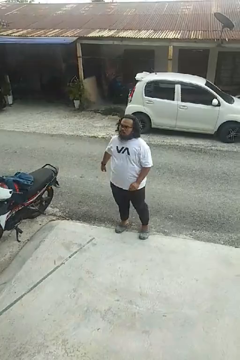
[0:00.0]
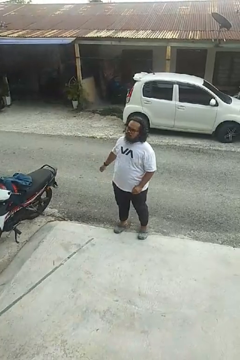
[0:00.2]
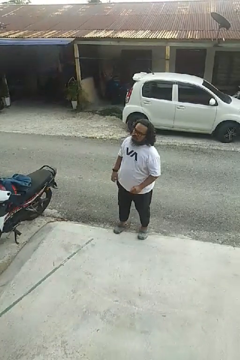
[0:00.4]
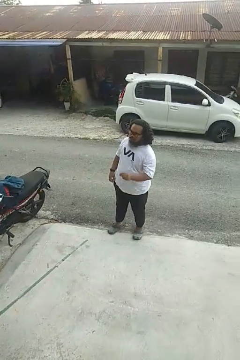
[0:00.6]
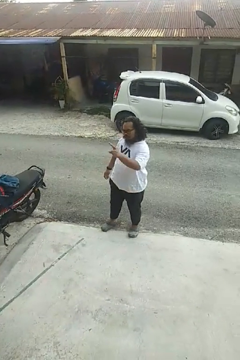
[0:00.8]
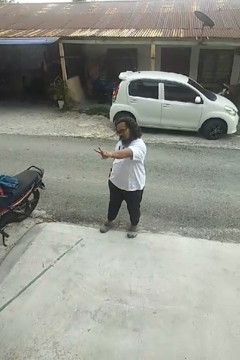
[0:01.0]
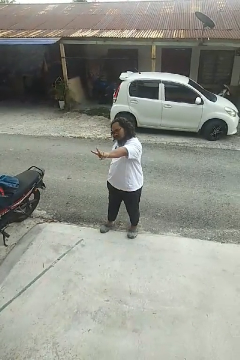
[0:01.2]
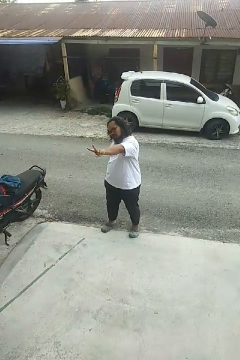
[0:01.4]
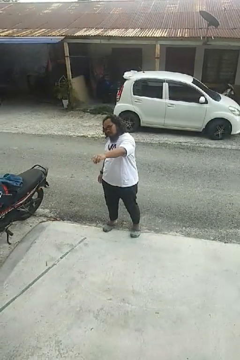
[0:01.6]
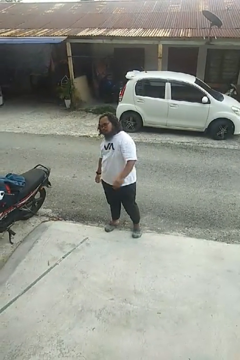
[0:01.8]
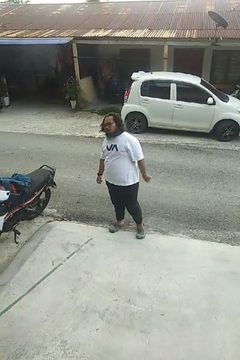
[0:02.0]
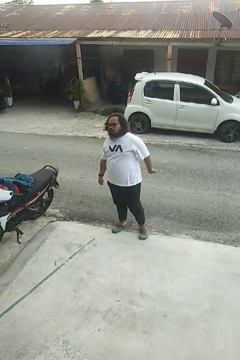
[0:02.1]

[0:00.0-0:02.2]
person gestures peace

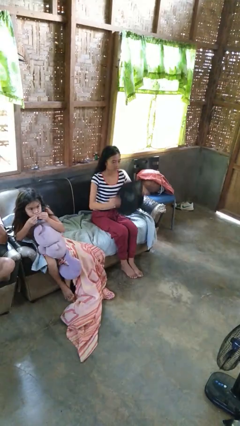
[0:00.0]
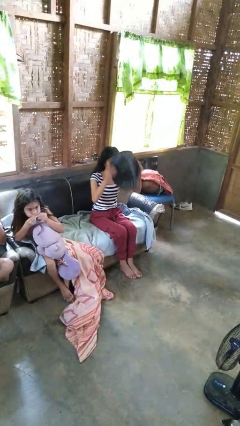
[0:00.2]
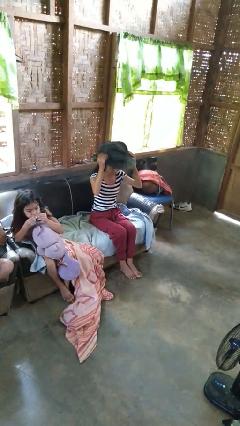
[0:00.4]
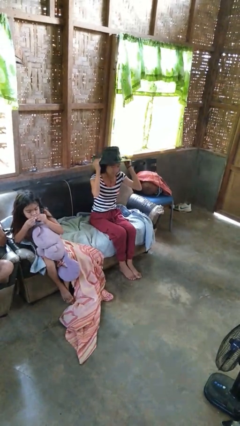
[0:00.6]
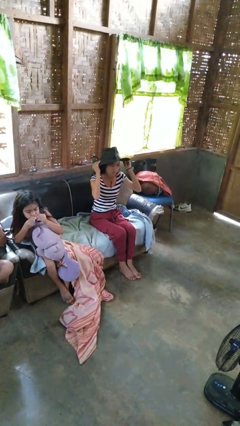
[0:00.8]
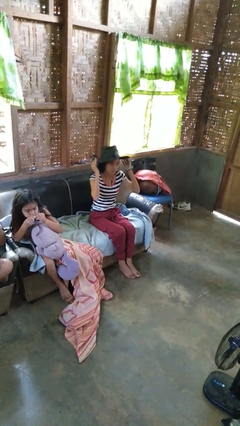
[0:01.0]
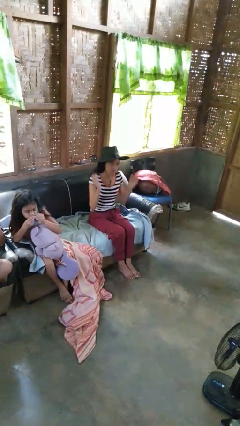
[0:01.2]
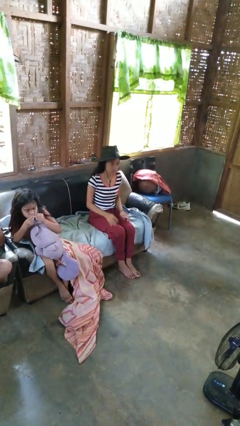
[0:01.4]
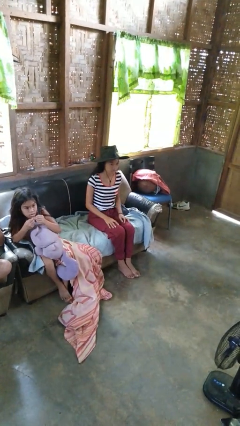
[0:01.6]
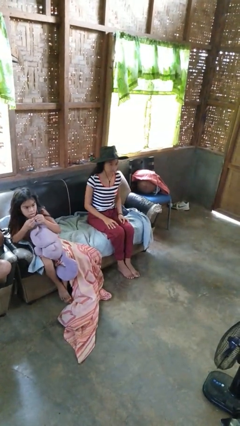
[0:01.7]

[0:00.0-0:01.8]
person puts on hat

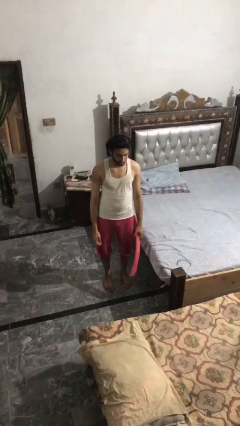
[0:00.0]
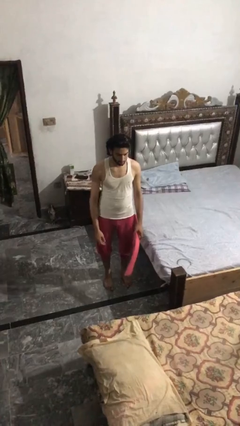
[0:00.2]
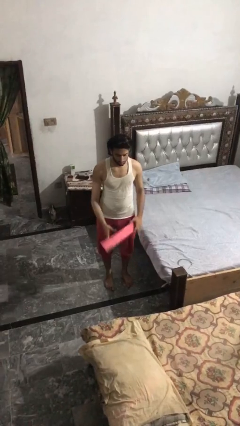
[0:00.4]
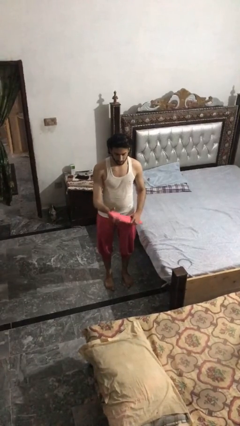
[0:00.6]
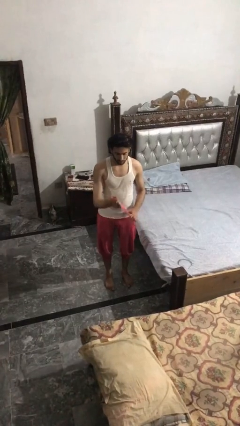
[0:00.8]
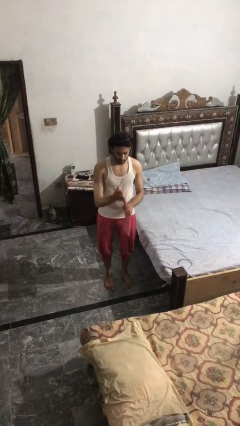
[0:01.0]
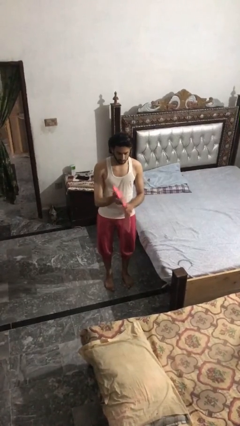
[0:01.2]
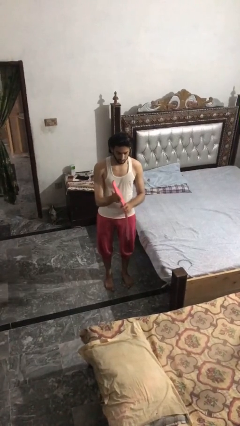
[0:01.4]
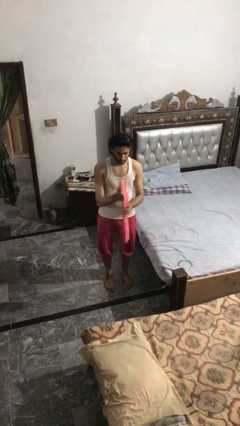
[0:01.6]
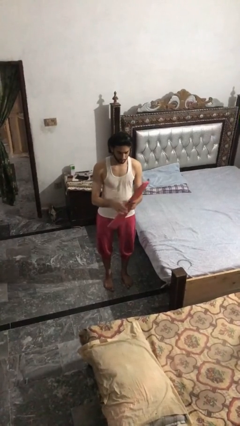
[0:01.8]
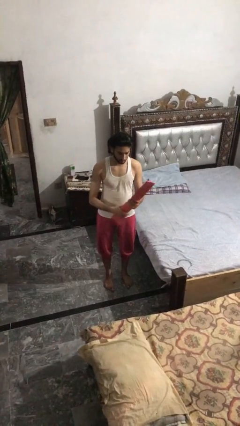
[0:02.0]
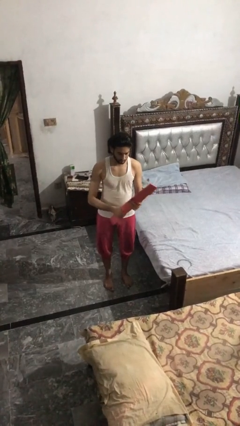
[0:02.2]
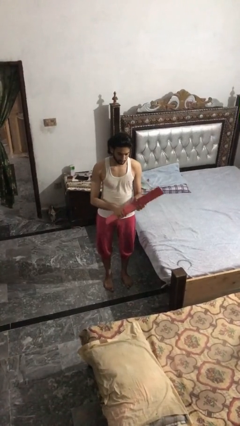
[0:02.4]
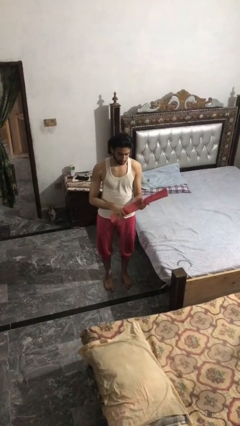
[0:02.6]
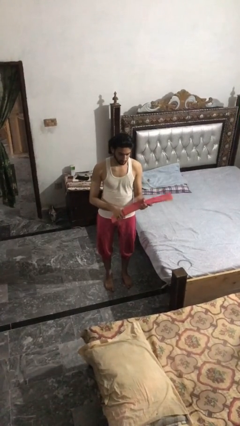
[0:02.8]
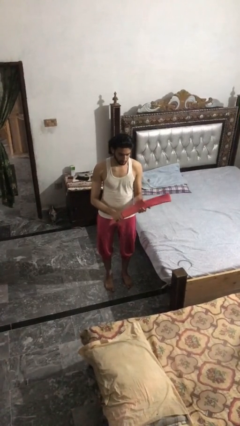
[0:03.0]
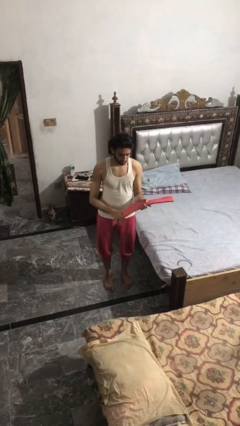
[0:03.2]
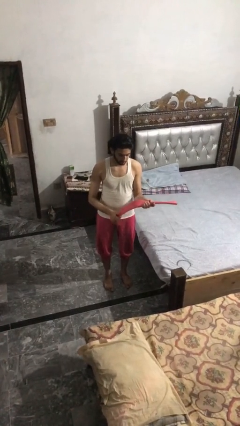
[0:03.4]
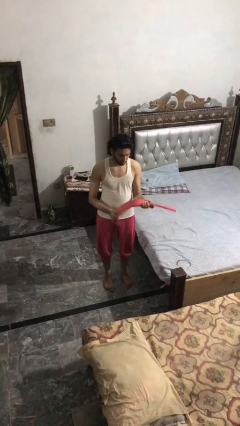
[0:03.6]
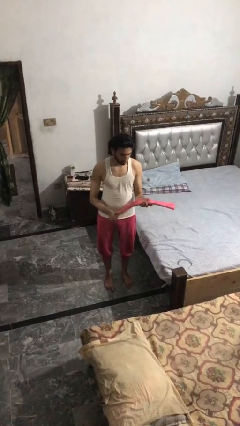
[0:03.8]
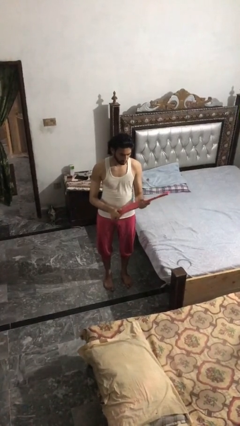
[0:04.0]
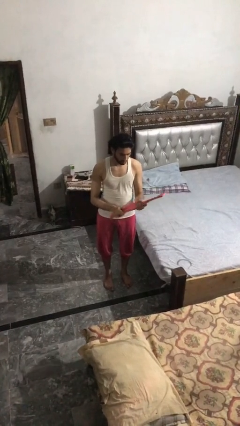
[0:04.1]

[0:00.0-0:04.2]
person squeezes object

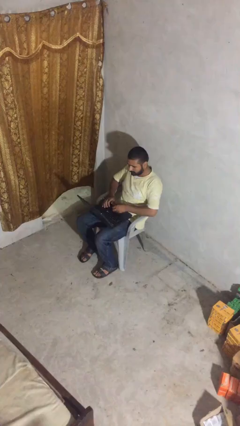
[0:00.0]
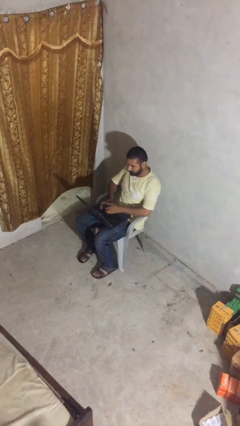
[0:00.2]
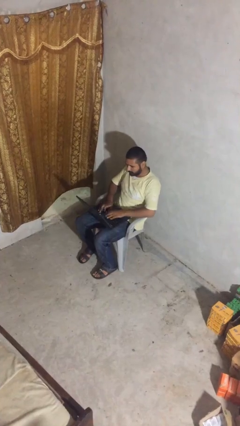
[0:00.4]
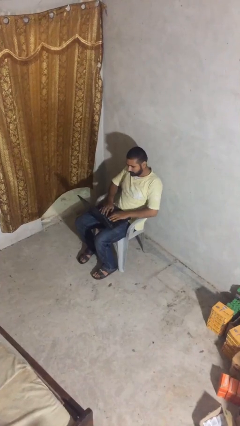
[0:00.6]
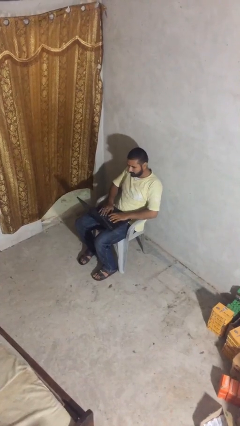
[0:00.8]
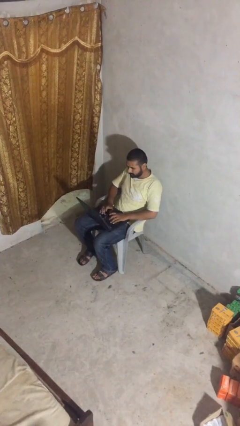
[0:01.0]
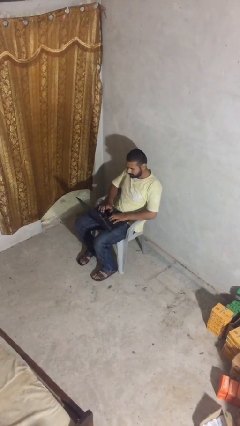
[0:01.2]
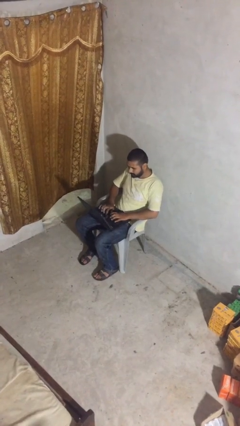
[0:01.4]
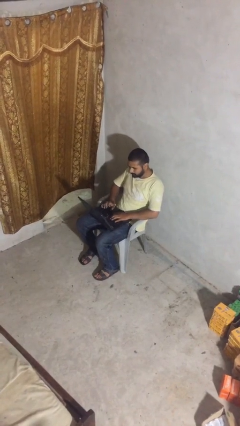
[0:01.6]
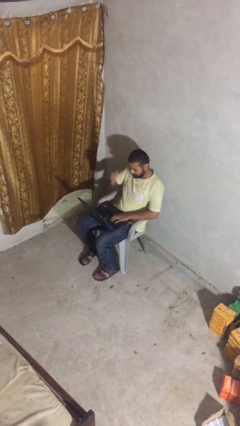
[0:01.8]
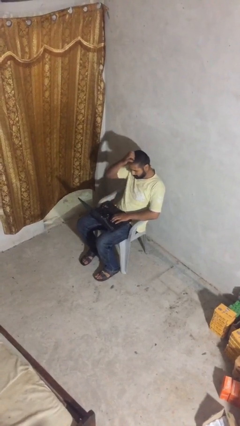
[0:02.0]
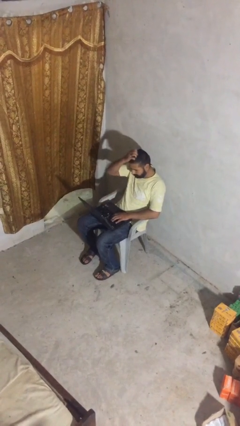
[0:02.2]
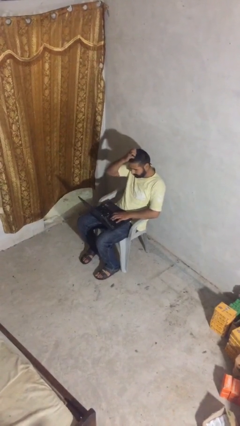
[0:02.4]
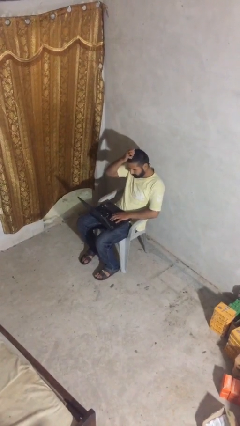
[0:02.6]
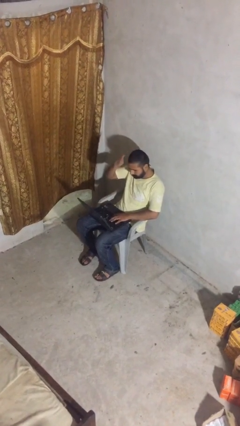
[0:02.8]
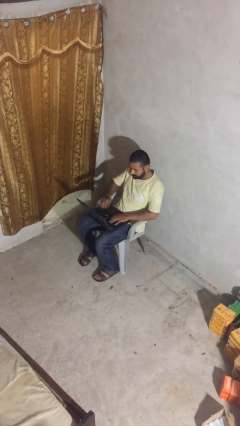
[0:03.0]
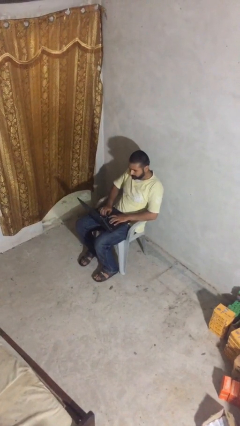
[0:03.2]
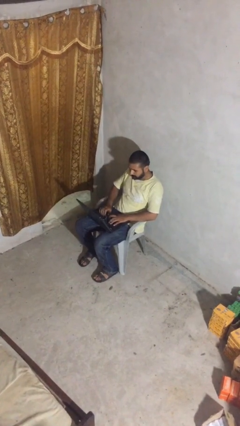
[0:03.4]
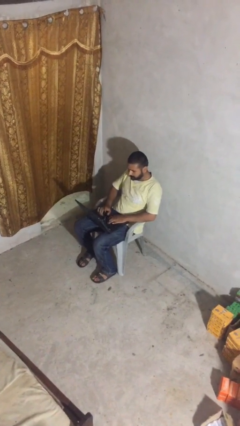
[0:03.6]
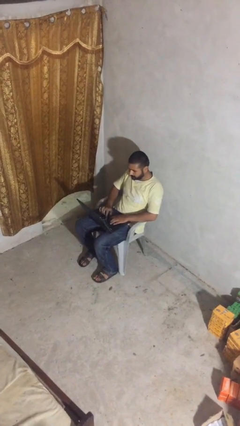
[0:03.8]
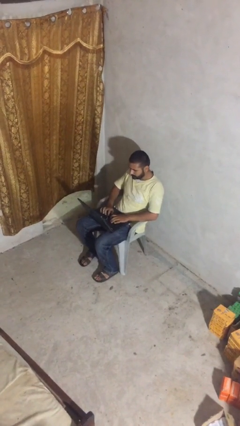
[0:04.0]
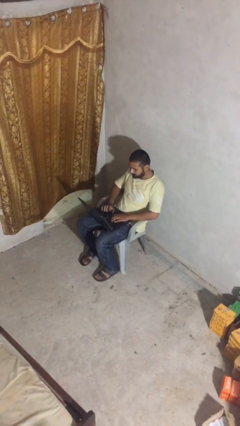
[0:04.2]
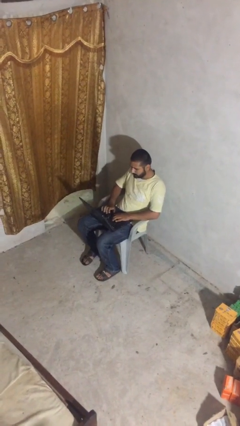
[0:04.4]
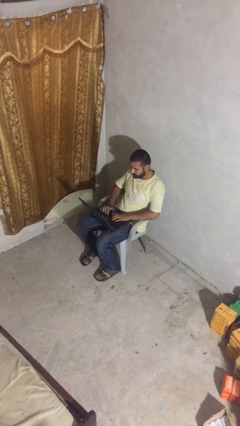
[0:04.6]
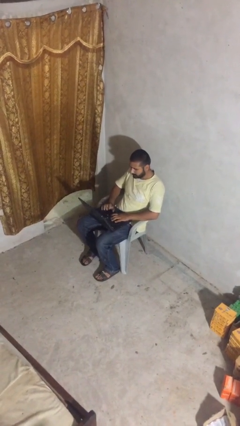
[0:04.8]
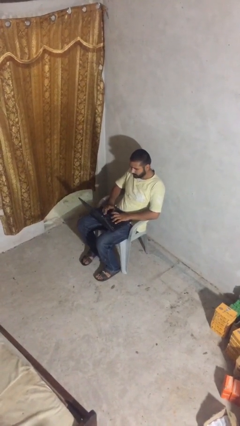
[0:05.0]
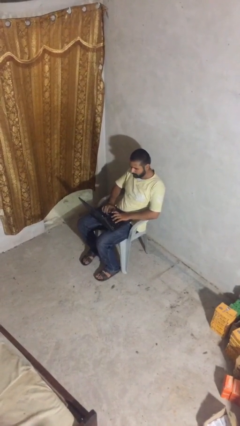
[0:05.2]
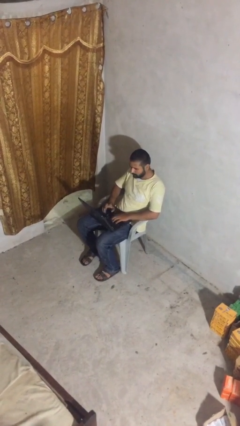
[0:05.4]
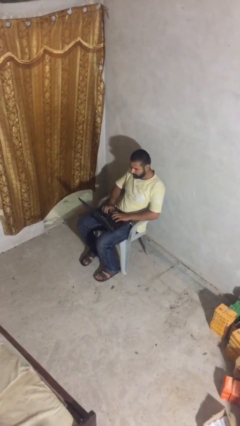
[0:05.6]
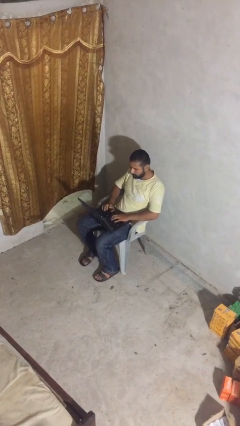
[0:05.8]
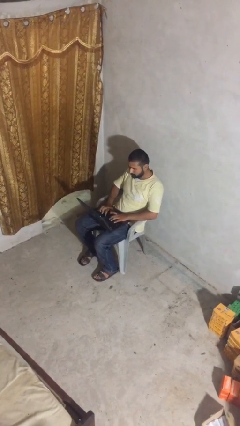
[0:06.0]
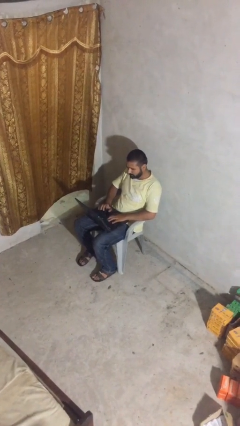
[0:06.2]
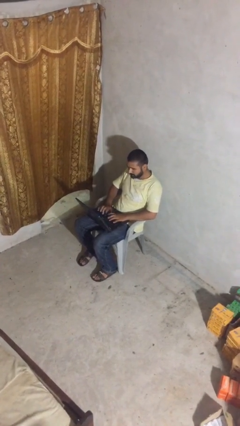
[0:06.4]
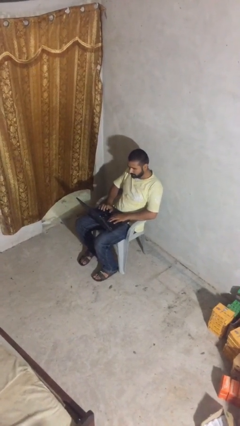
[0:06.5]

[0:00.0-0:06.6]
person interacts with laptop

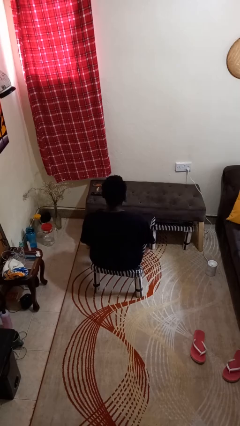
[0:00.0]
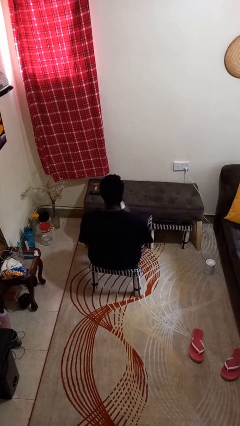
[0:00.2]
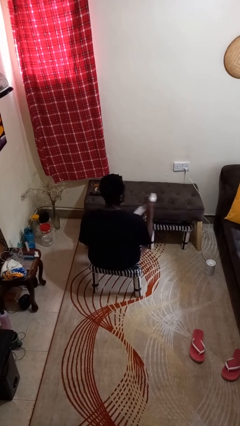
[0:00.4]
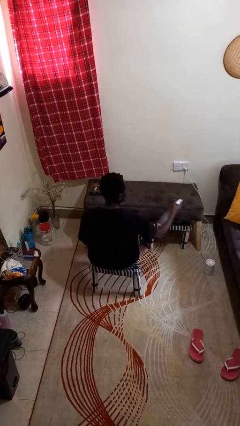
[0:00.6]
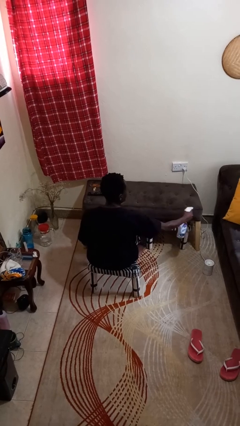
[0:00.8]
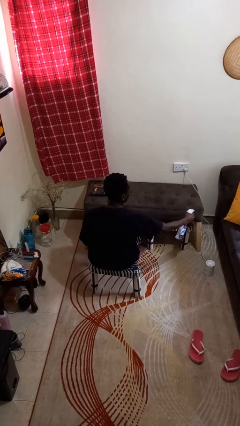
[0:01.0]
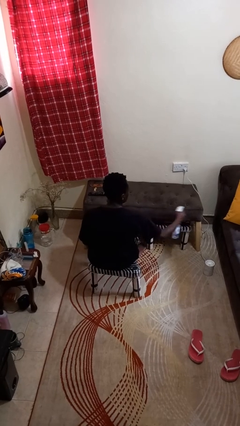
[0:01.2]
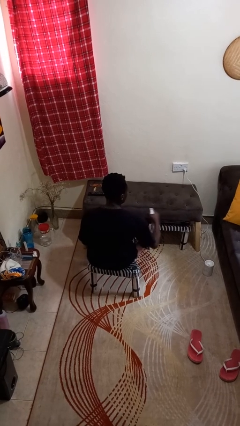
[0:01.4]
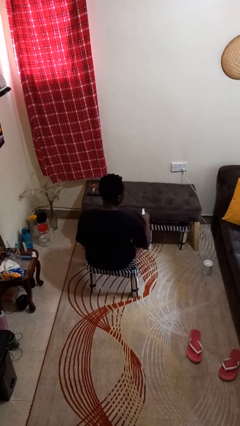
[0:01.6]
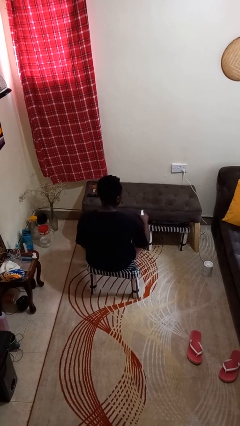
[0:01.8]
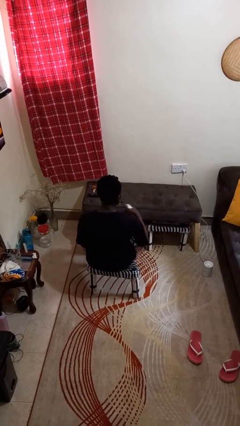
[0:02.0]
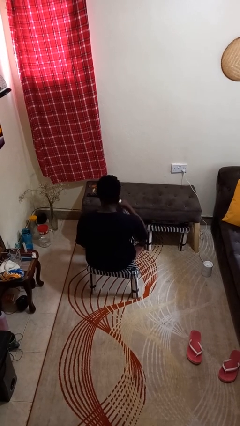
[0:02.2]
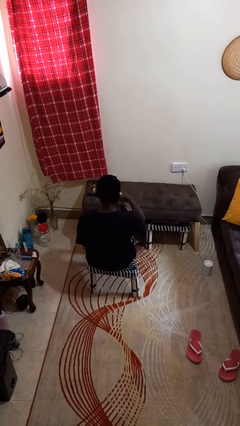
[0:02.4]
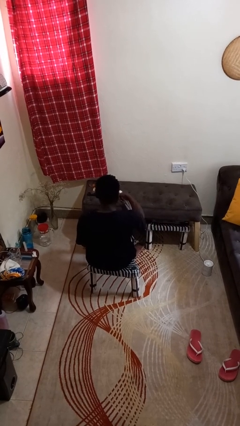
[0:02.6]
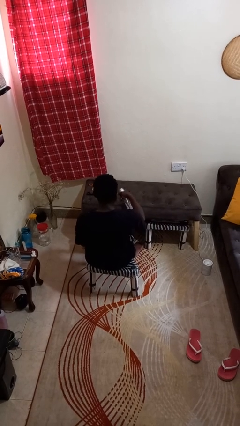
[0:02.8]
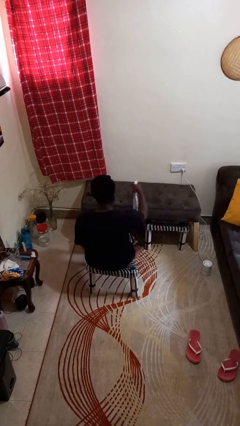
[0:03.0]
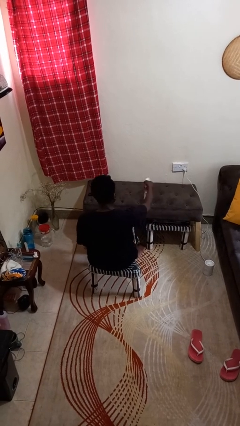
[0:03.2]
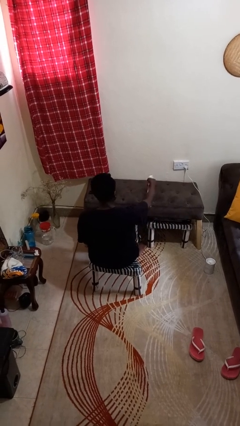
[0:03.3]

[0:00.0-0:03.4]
person sprays from bottle
